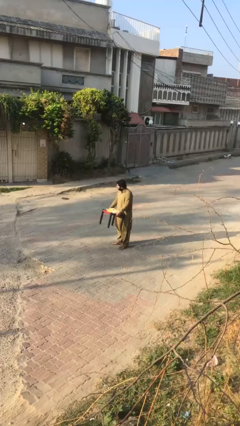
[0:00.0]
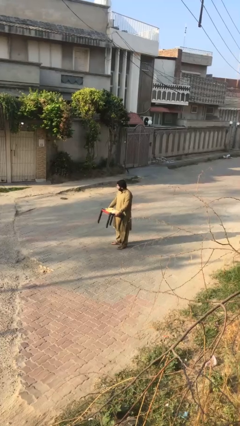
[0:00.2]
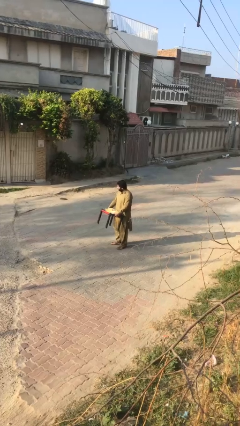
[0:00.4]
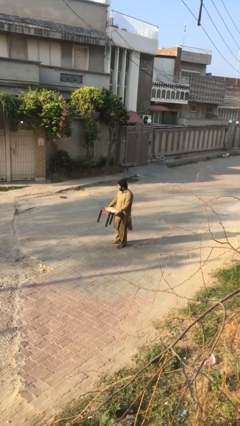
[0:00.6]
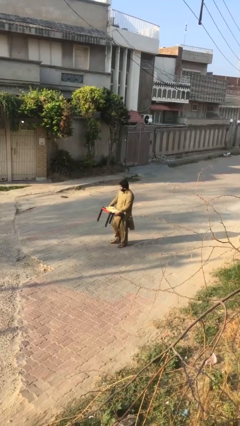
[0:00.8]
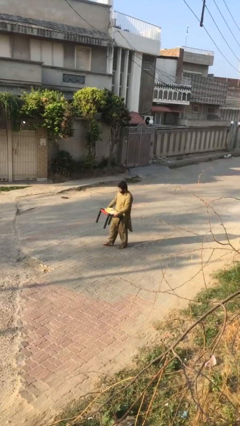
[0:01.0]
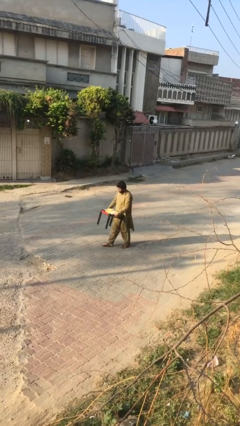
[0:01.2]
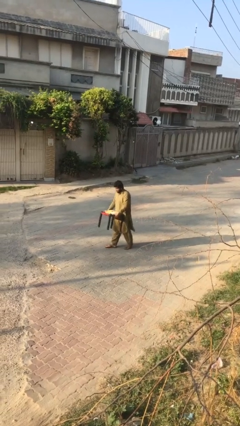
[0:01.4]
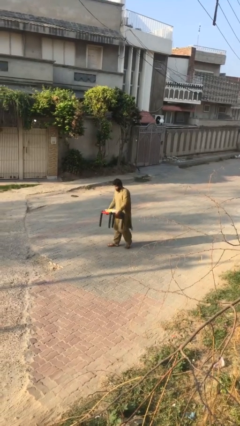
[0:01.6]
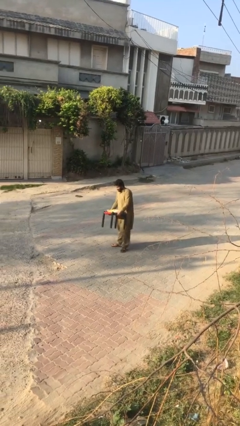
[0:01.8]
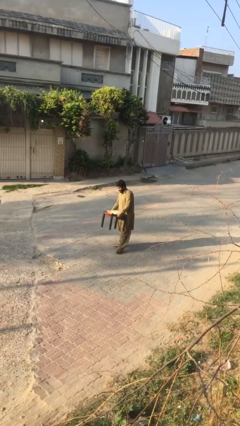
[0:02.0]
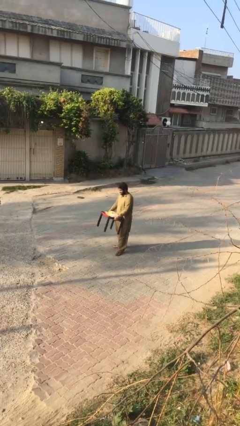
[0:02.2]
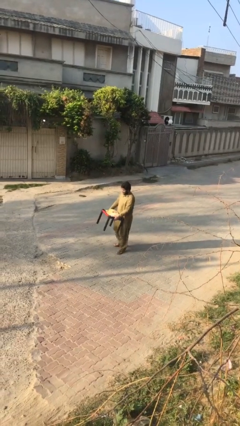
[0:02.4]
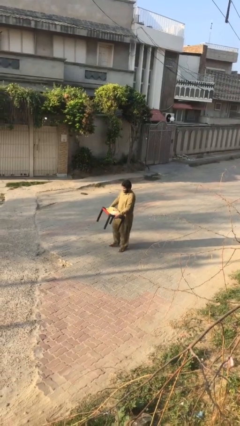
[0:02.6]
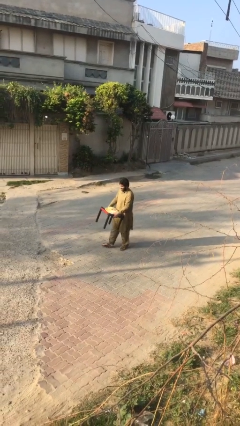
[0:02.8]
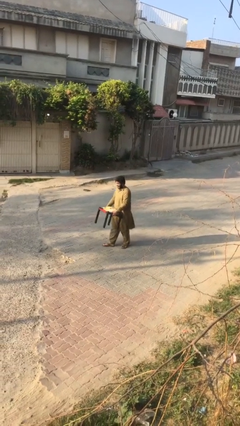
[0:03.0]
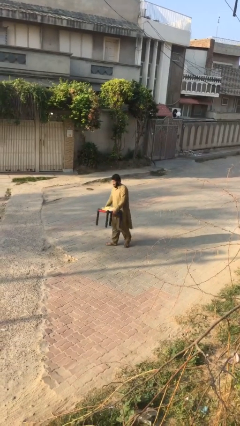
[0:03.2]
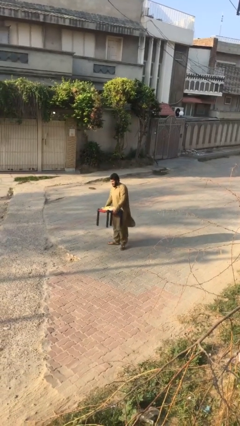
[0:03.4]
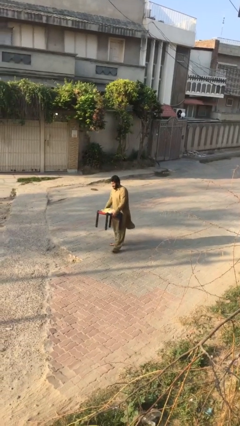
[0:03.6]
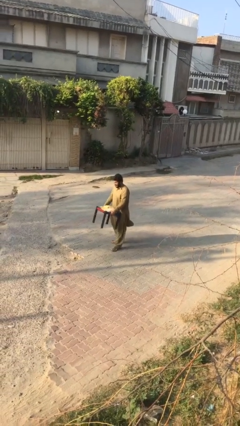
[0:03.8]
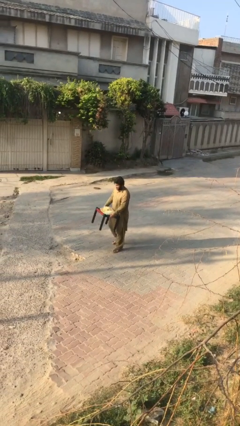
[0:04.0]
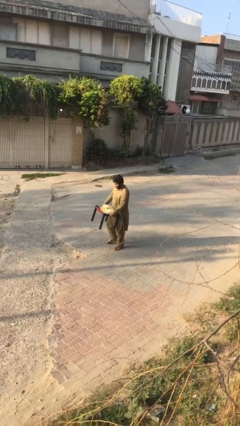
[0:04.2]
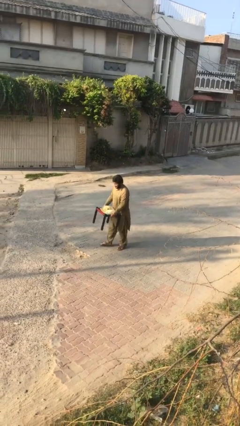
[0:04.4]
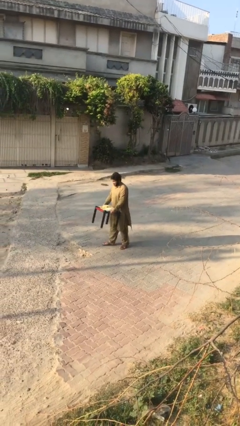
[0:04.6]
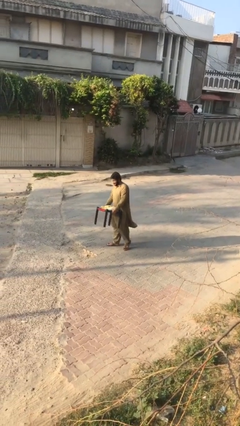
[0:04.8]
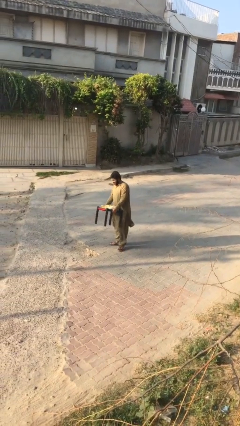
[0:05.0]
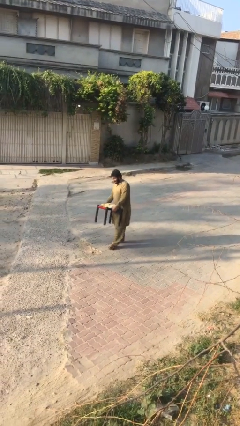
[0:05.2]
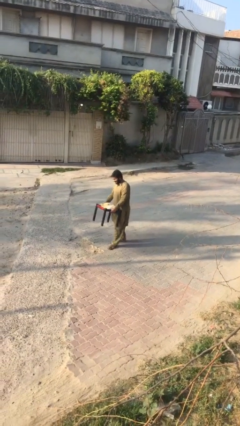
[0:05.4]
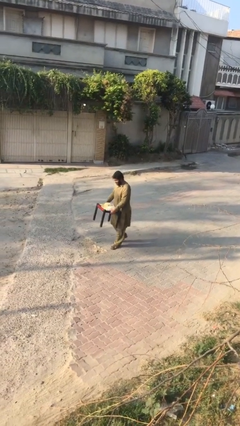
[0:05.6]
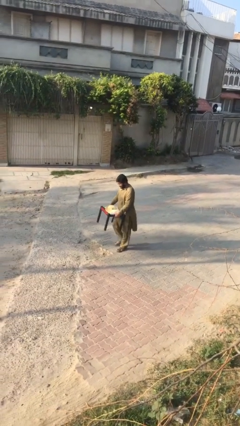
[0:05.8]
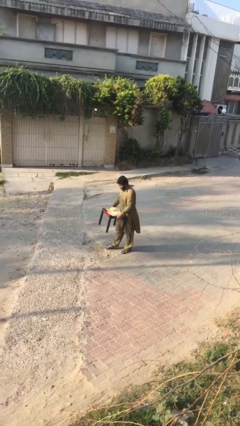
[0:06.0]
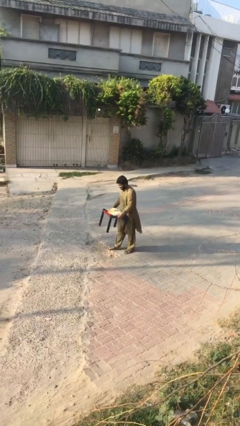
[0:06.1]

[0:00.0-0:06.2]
person carries heavy object

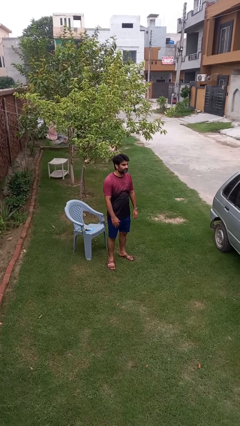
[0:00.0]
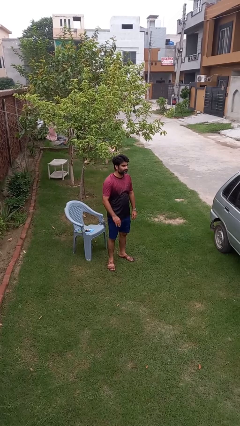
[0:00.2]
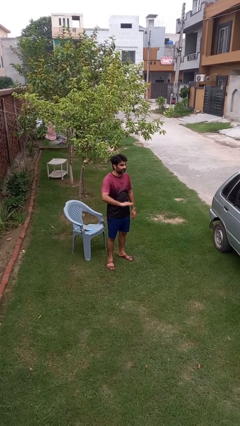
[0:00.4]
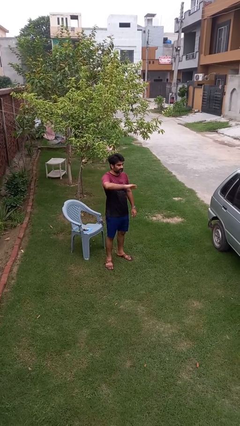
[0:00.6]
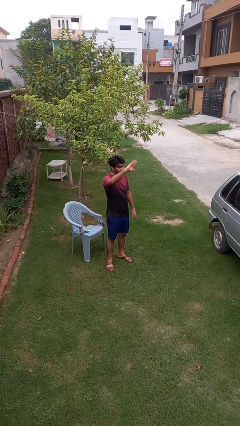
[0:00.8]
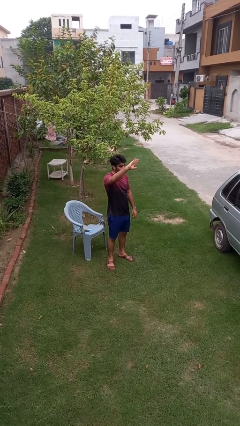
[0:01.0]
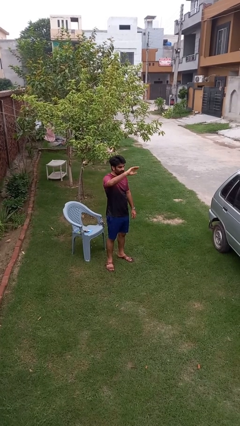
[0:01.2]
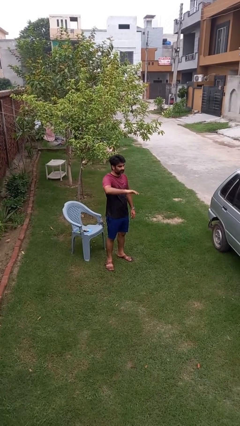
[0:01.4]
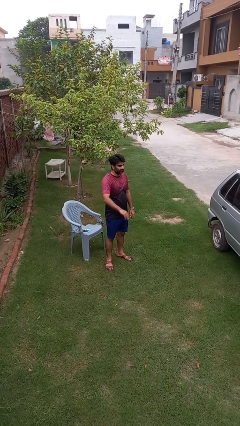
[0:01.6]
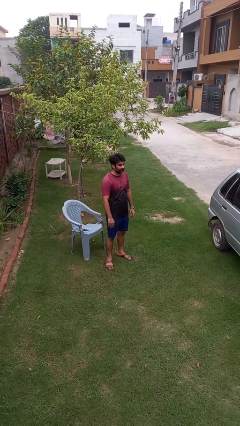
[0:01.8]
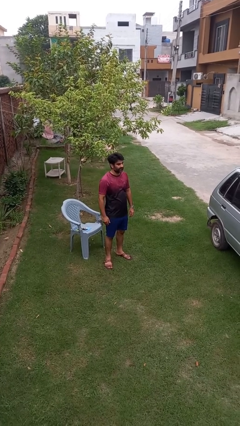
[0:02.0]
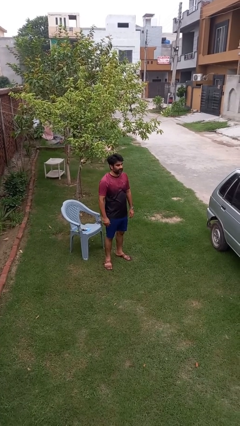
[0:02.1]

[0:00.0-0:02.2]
person gestures swipe up

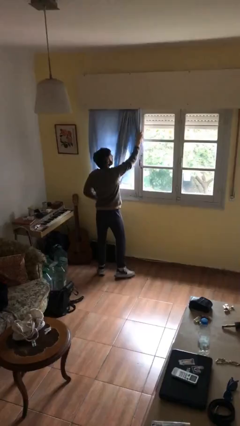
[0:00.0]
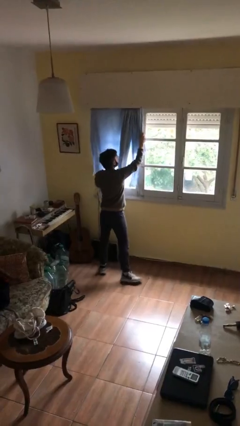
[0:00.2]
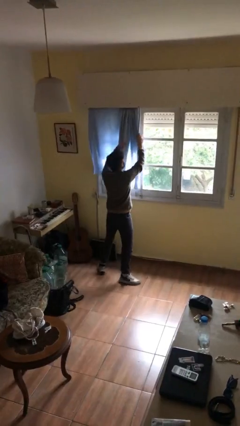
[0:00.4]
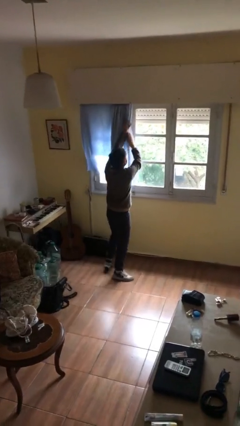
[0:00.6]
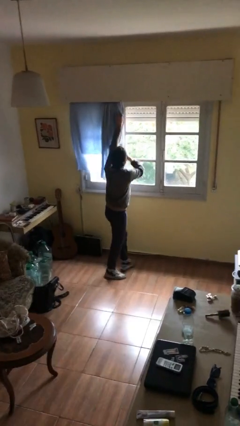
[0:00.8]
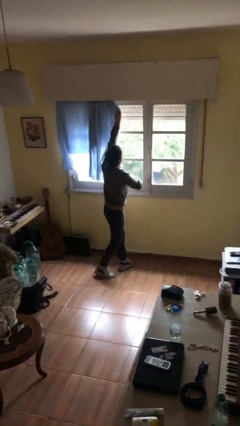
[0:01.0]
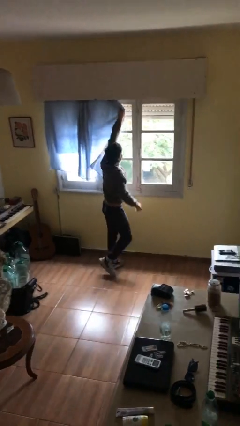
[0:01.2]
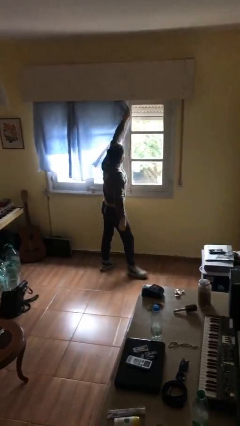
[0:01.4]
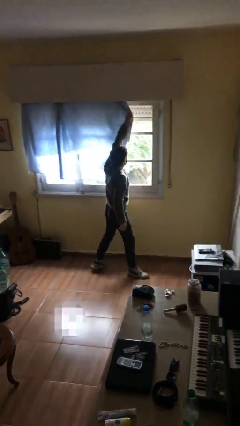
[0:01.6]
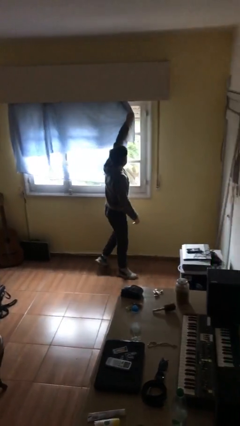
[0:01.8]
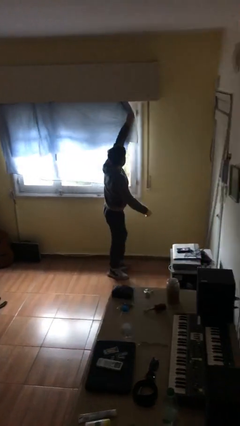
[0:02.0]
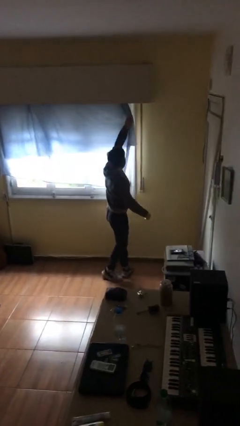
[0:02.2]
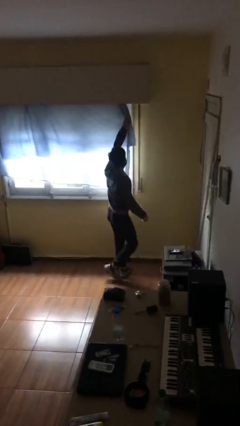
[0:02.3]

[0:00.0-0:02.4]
person closes curtains

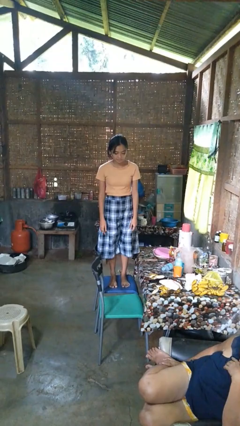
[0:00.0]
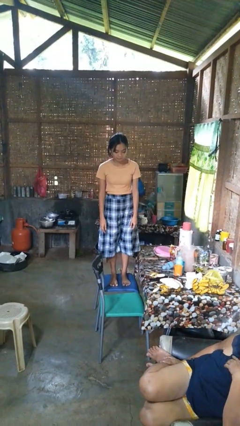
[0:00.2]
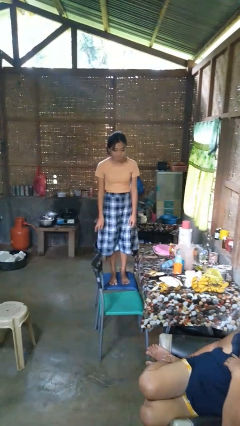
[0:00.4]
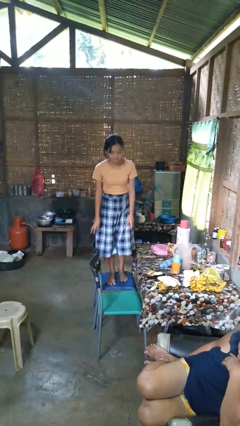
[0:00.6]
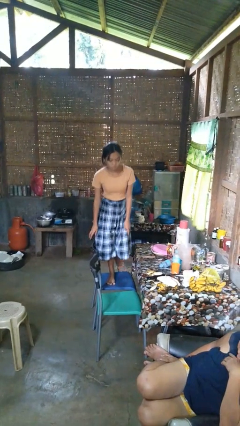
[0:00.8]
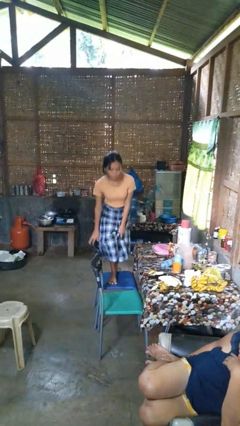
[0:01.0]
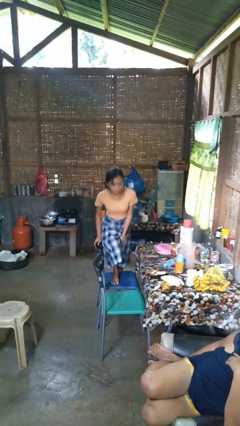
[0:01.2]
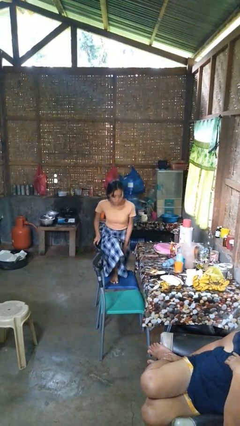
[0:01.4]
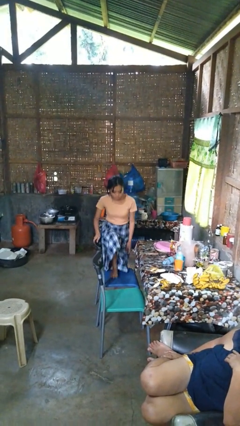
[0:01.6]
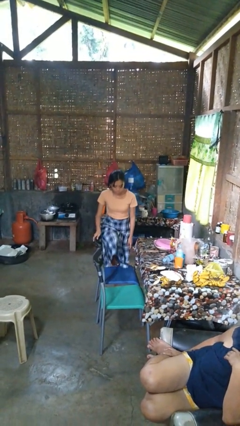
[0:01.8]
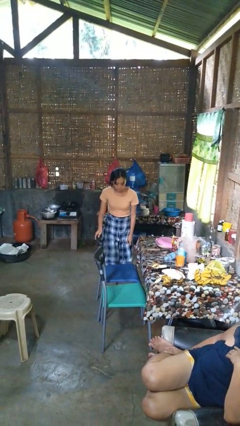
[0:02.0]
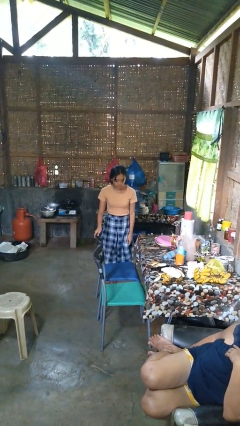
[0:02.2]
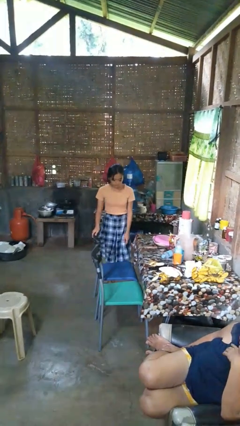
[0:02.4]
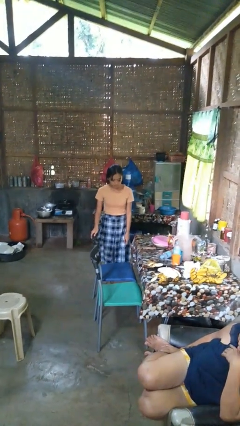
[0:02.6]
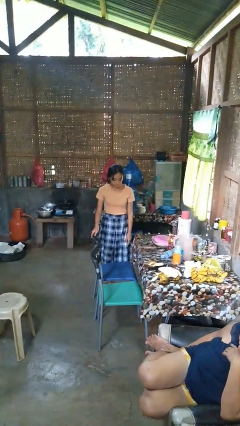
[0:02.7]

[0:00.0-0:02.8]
person climbs off couch

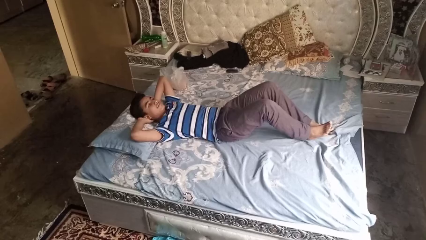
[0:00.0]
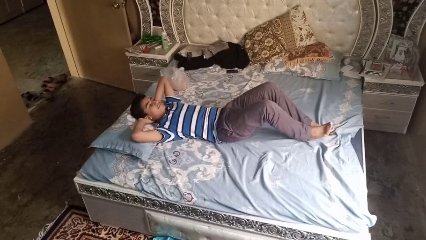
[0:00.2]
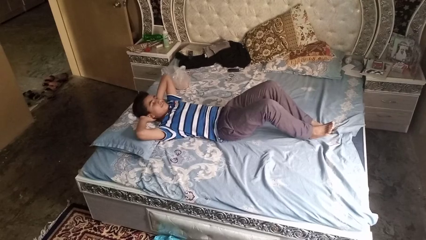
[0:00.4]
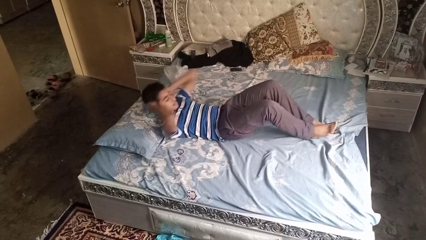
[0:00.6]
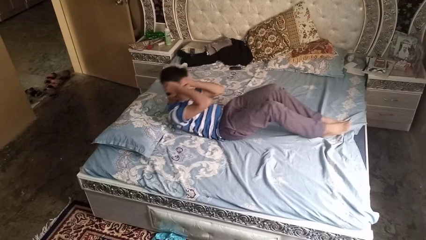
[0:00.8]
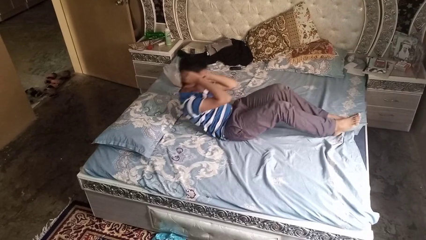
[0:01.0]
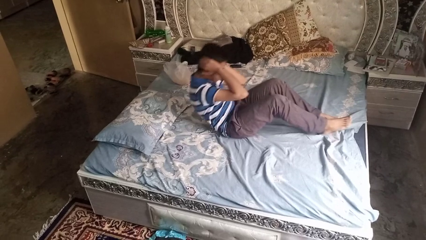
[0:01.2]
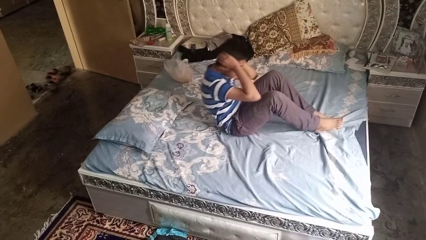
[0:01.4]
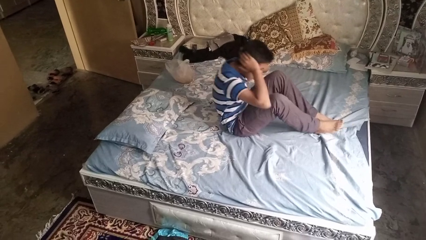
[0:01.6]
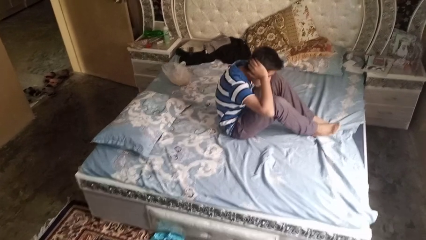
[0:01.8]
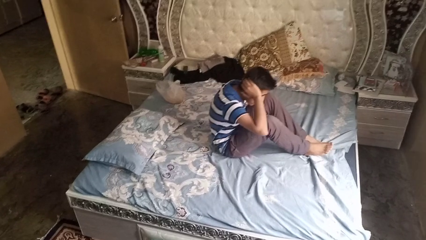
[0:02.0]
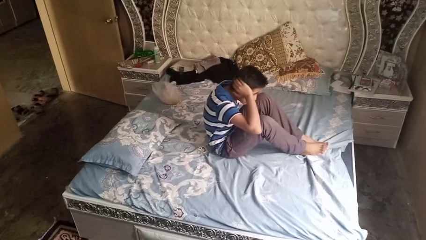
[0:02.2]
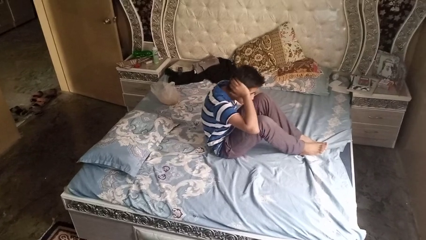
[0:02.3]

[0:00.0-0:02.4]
person exercises with situp

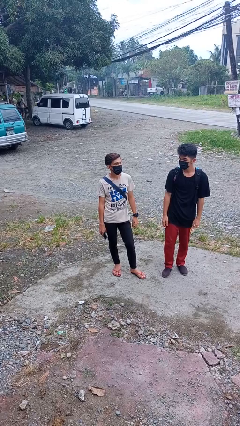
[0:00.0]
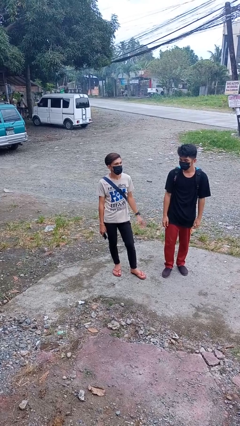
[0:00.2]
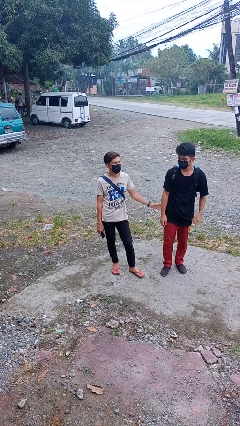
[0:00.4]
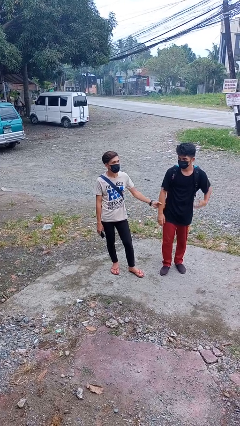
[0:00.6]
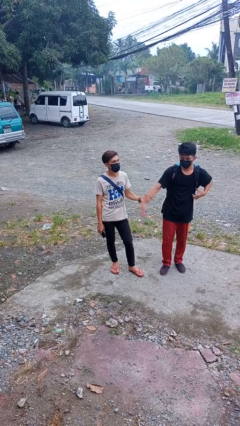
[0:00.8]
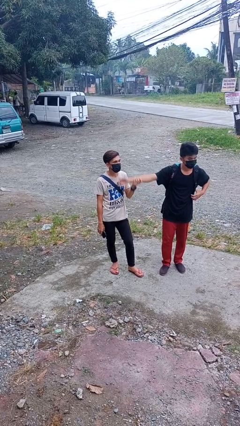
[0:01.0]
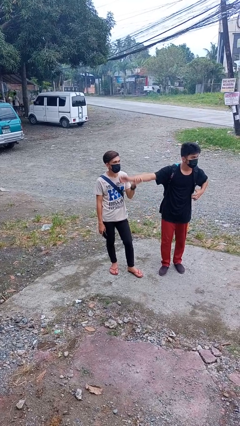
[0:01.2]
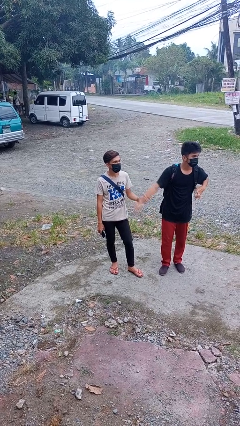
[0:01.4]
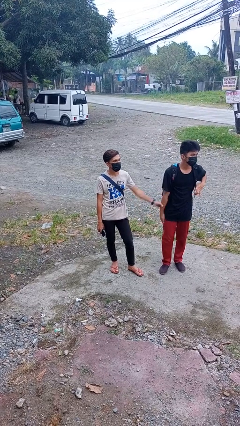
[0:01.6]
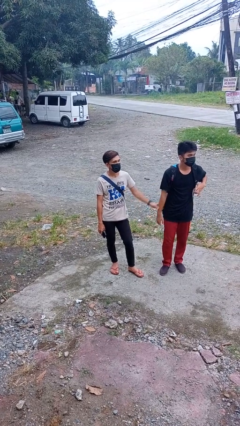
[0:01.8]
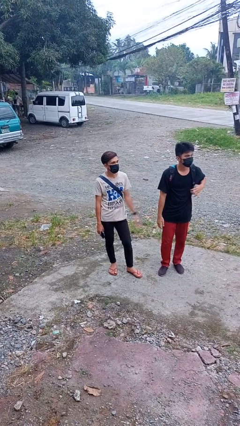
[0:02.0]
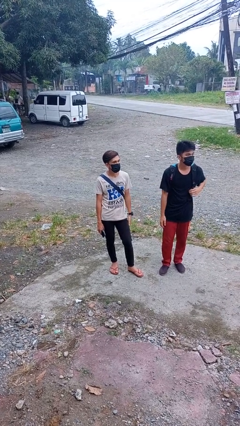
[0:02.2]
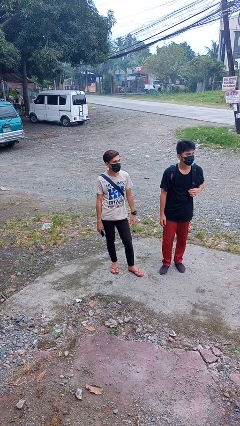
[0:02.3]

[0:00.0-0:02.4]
person grabs person by forearm
